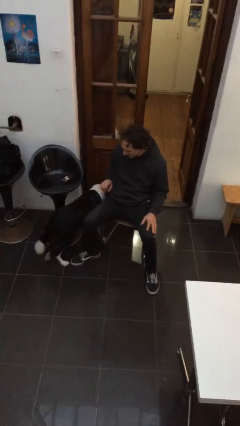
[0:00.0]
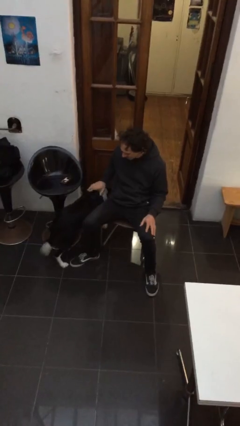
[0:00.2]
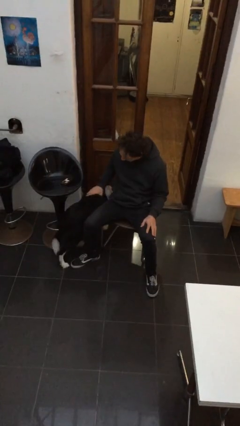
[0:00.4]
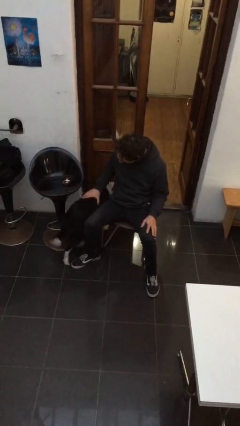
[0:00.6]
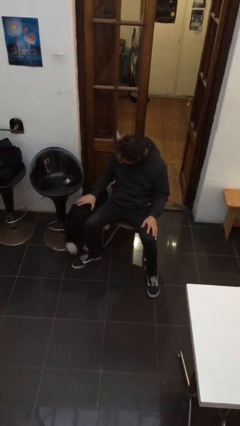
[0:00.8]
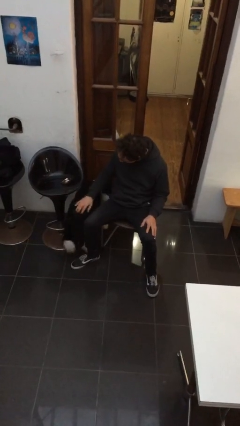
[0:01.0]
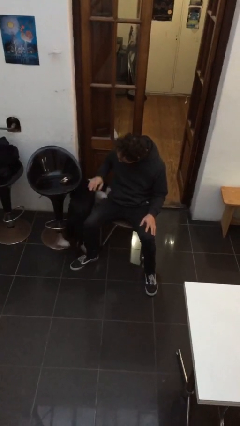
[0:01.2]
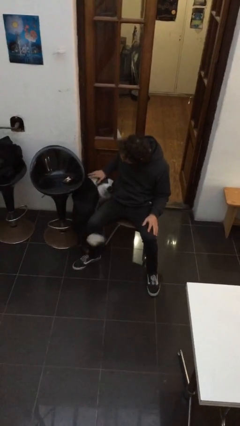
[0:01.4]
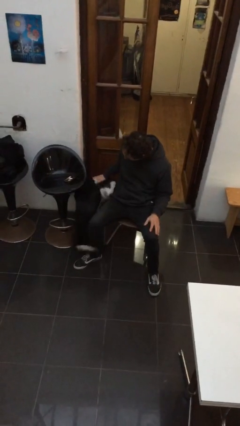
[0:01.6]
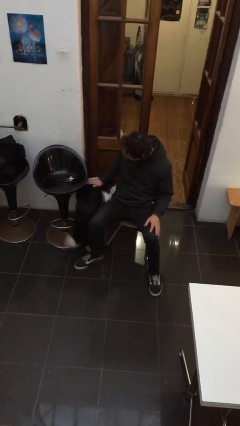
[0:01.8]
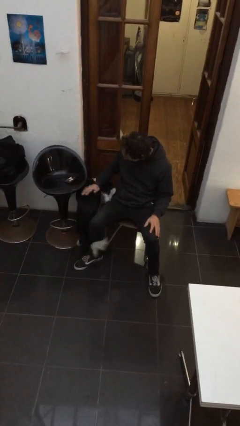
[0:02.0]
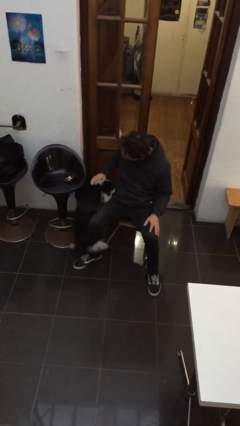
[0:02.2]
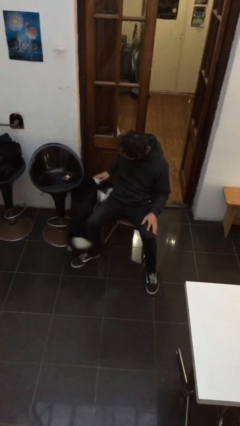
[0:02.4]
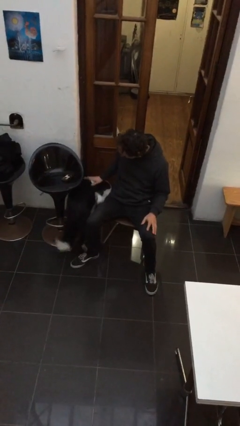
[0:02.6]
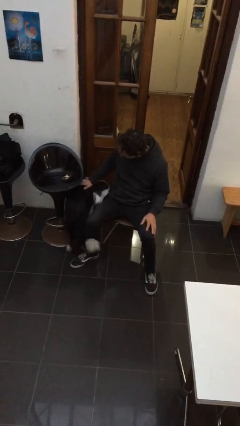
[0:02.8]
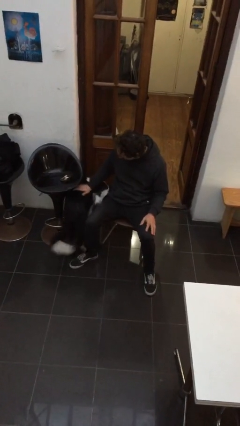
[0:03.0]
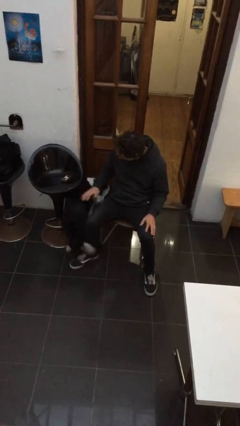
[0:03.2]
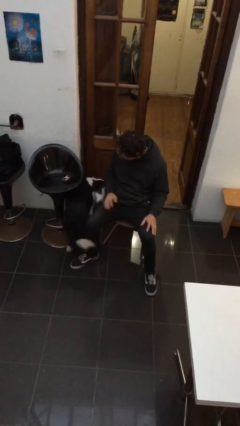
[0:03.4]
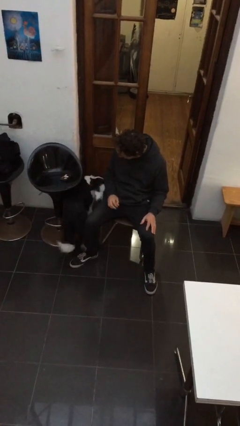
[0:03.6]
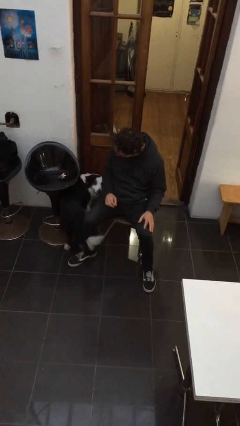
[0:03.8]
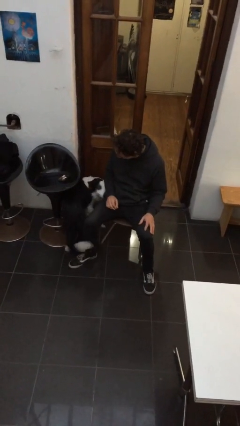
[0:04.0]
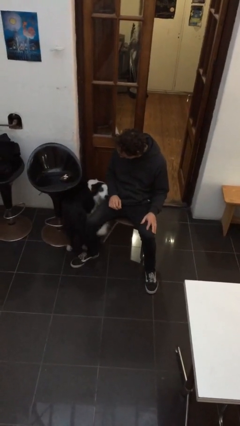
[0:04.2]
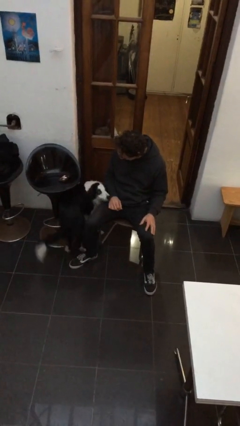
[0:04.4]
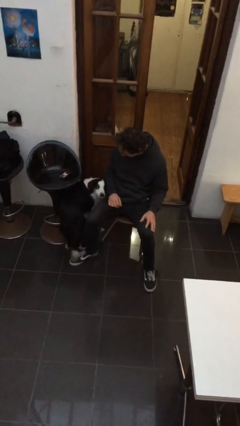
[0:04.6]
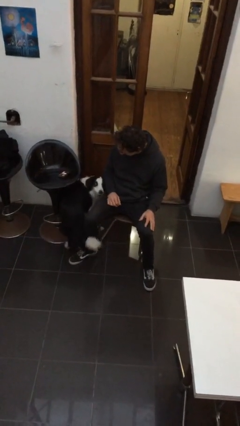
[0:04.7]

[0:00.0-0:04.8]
person pets dog

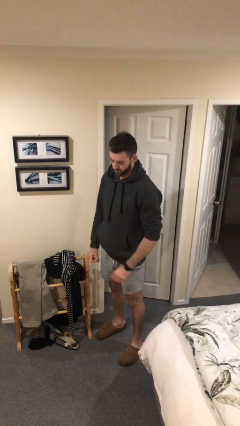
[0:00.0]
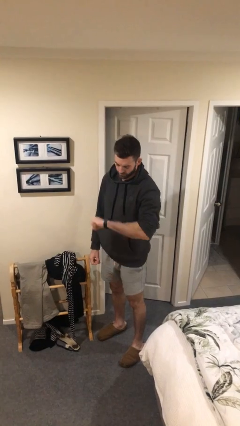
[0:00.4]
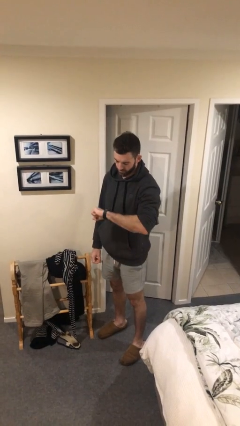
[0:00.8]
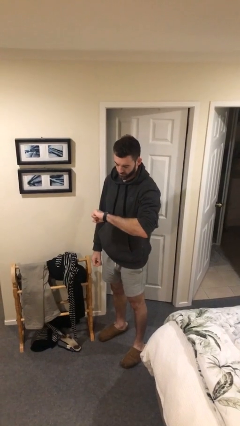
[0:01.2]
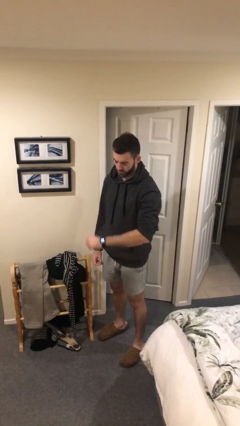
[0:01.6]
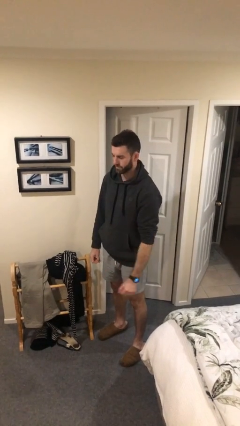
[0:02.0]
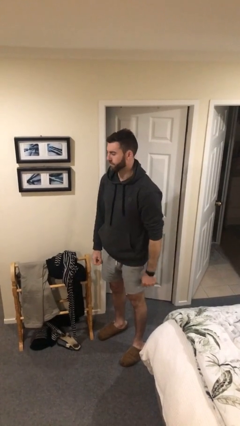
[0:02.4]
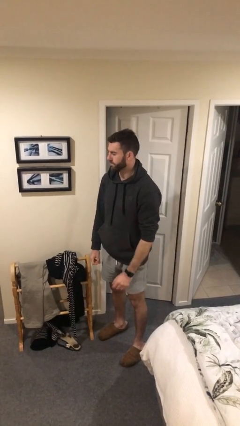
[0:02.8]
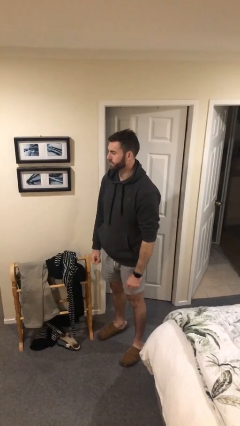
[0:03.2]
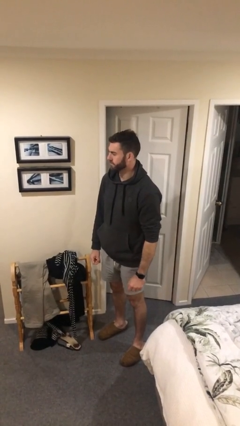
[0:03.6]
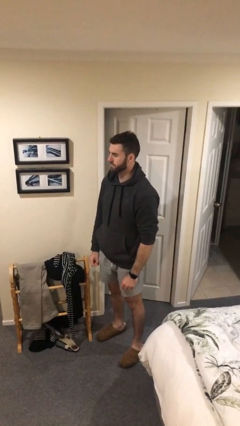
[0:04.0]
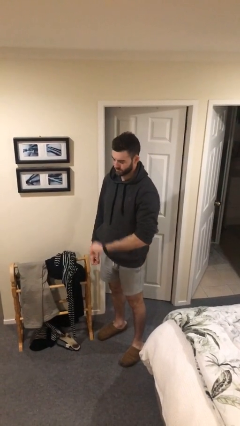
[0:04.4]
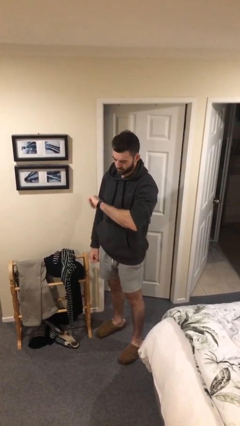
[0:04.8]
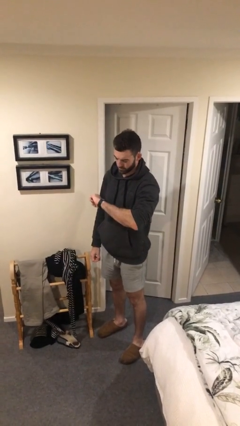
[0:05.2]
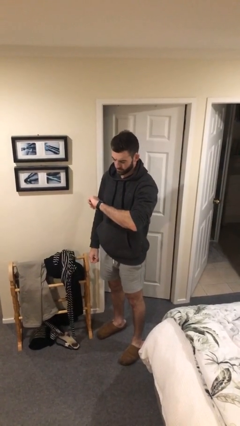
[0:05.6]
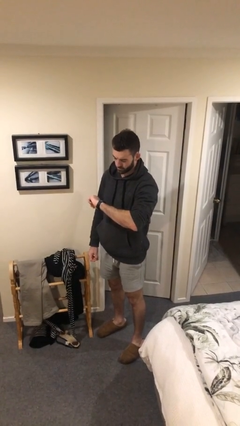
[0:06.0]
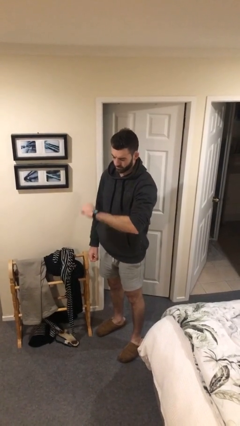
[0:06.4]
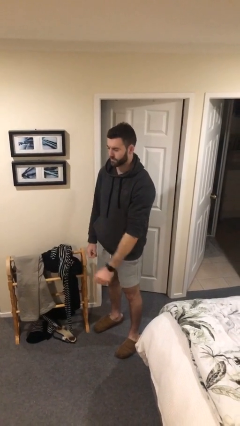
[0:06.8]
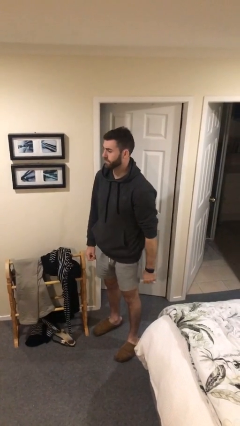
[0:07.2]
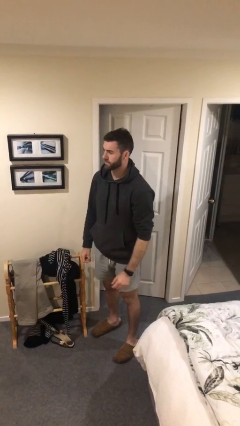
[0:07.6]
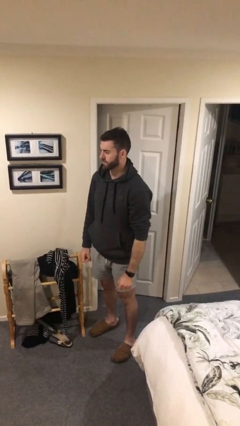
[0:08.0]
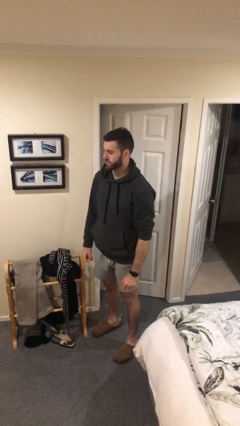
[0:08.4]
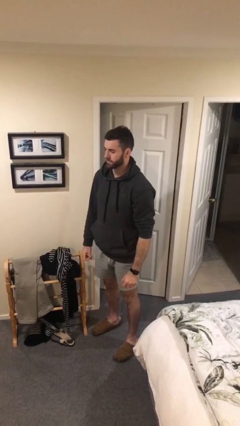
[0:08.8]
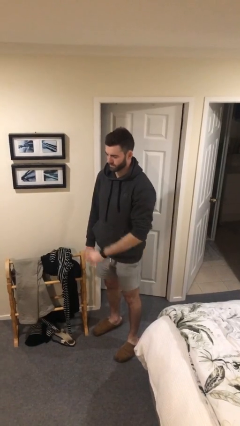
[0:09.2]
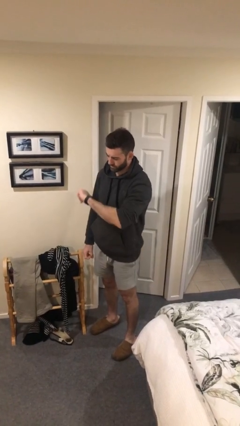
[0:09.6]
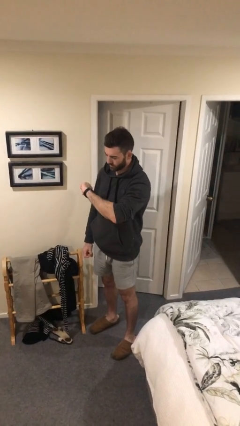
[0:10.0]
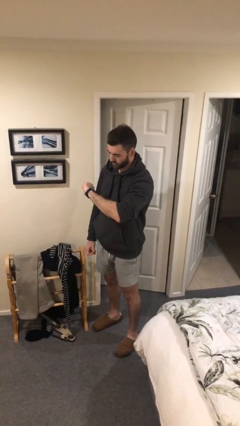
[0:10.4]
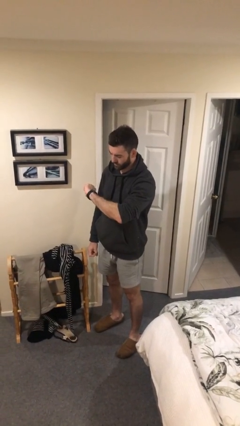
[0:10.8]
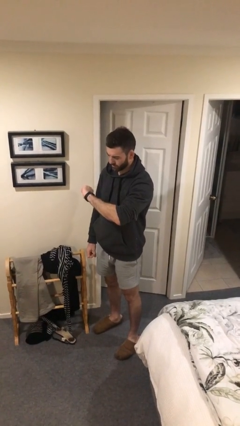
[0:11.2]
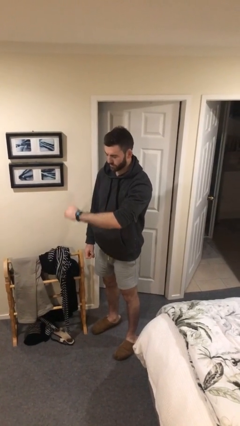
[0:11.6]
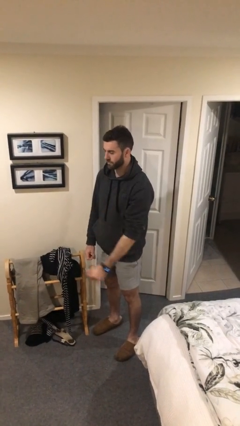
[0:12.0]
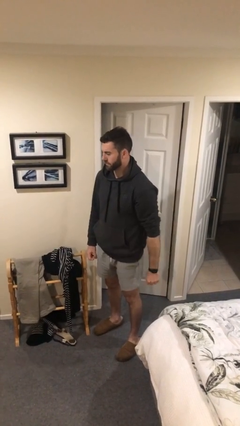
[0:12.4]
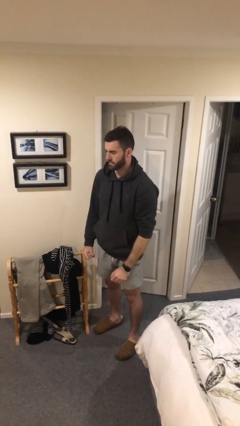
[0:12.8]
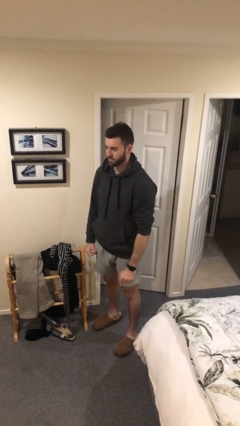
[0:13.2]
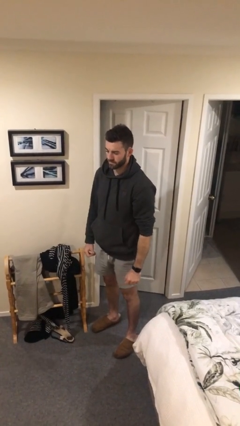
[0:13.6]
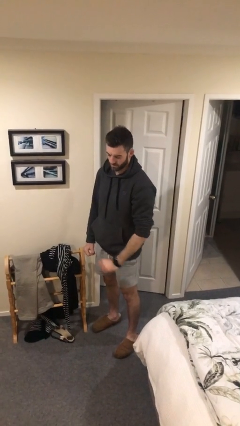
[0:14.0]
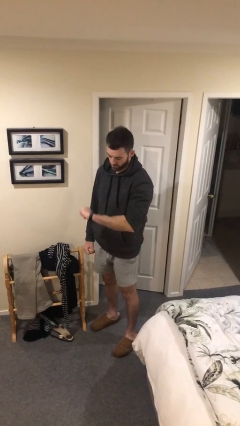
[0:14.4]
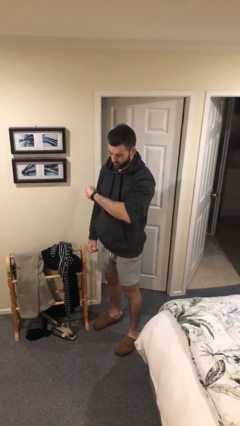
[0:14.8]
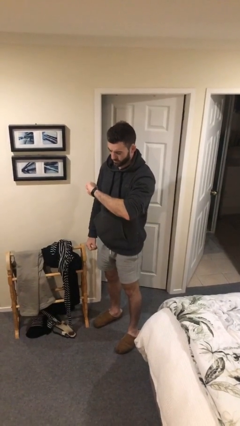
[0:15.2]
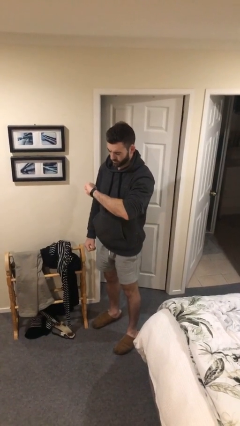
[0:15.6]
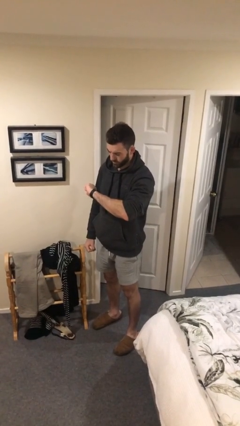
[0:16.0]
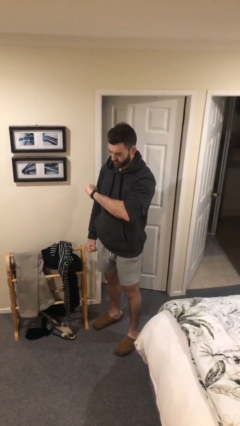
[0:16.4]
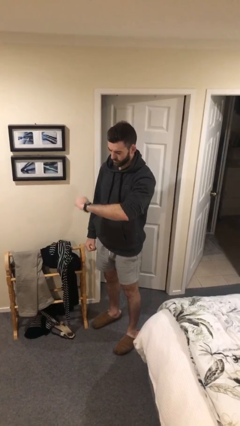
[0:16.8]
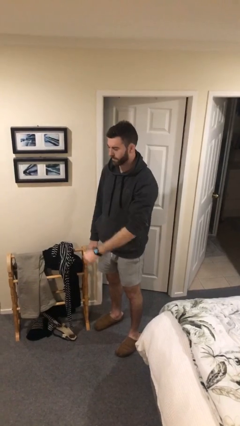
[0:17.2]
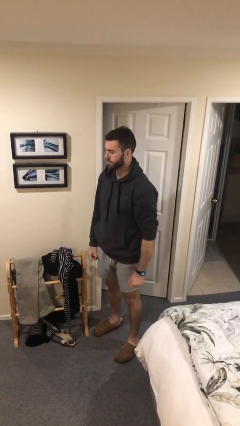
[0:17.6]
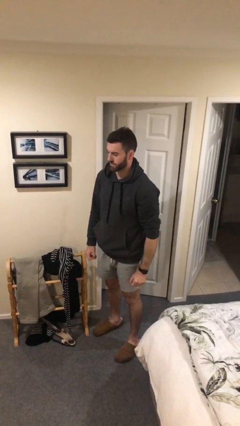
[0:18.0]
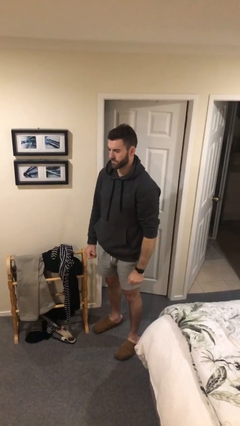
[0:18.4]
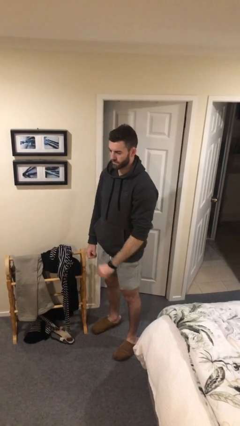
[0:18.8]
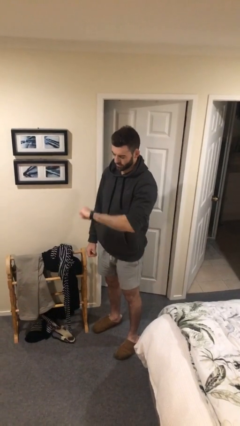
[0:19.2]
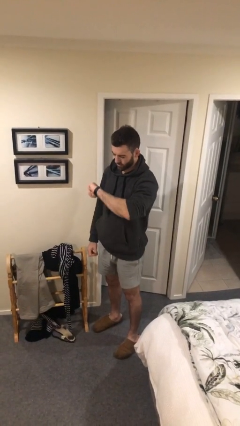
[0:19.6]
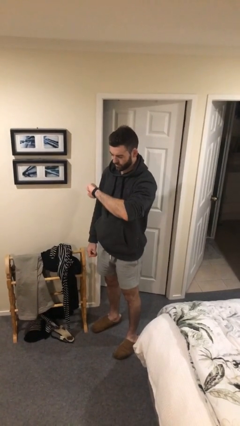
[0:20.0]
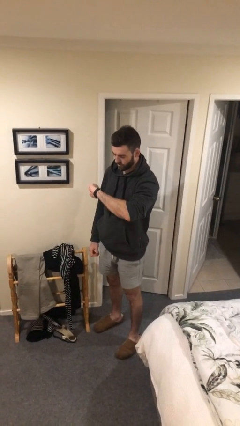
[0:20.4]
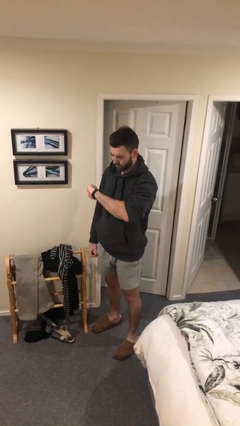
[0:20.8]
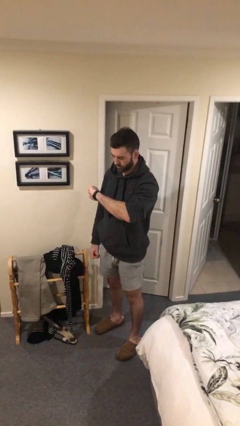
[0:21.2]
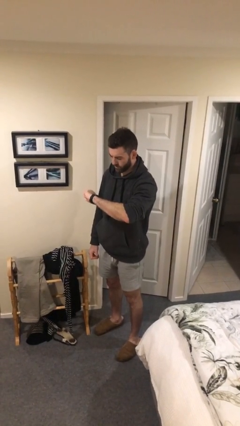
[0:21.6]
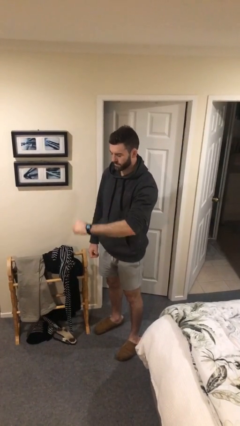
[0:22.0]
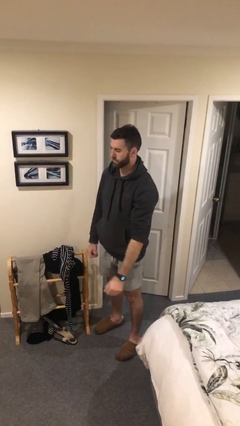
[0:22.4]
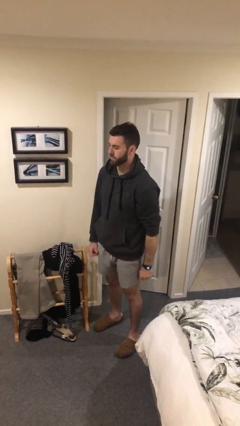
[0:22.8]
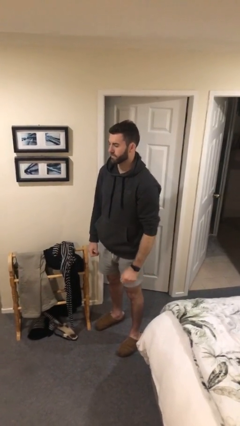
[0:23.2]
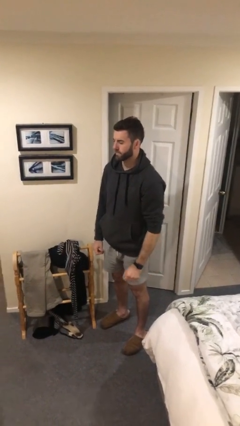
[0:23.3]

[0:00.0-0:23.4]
person looks at wristwatch

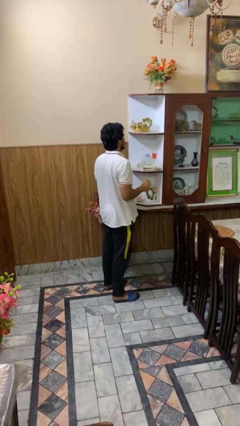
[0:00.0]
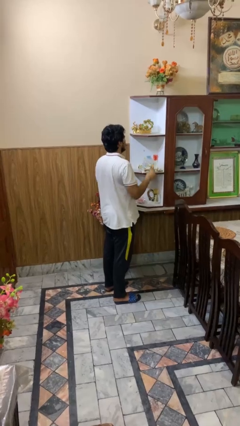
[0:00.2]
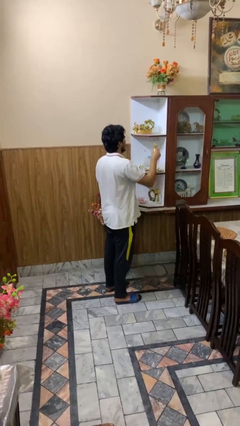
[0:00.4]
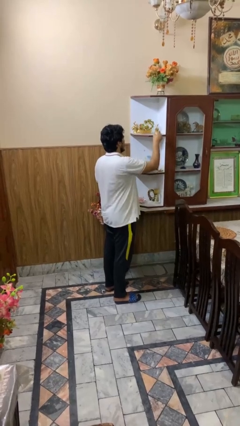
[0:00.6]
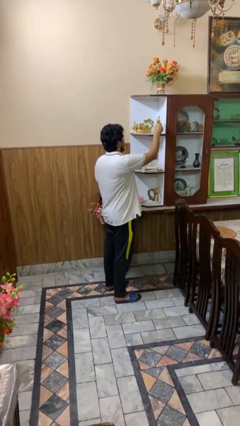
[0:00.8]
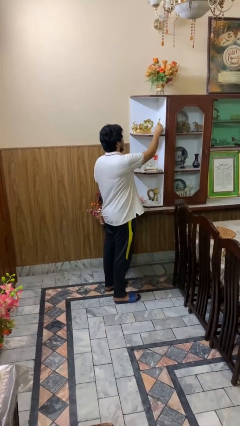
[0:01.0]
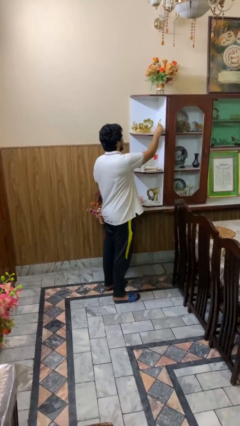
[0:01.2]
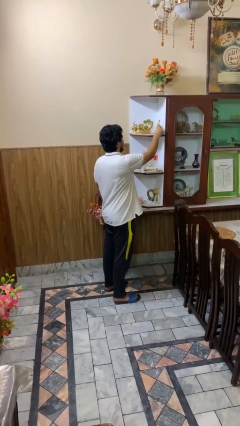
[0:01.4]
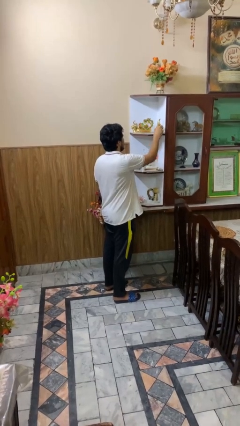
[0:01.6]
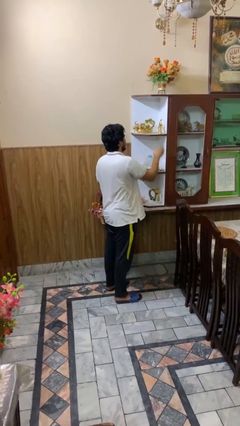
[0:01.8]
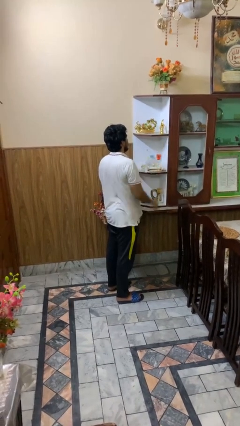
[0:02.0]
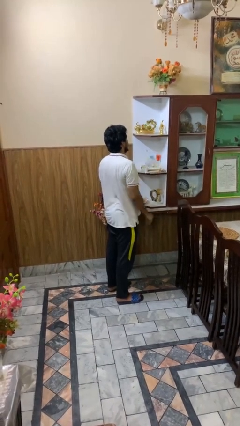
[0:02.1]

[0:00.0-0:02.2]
person puts down object on shelf
